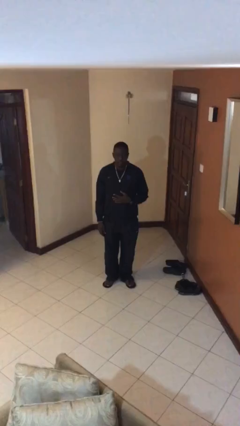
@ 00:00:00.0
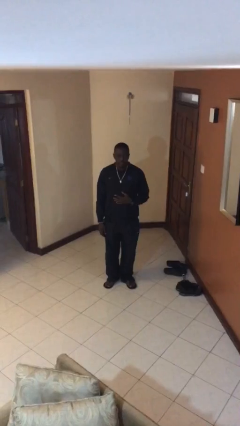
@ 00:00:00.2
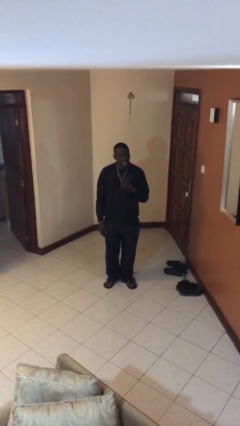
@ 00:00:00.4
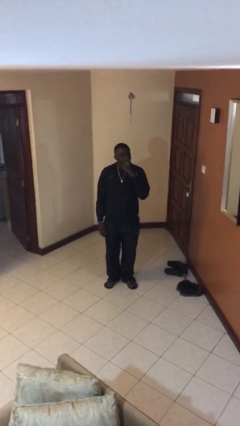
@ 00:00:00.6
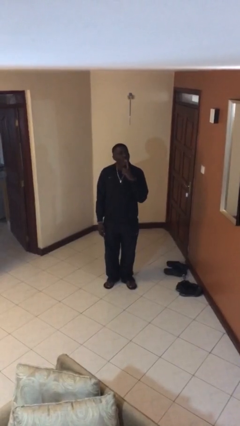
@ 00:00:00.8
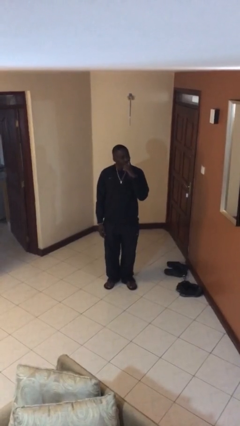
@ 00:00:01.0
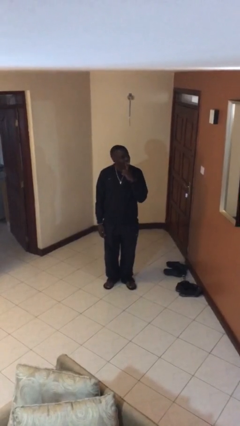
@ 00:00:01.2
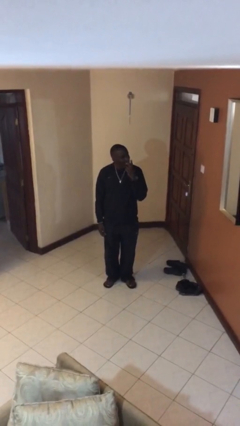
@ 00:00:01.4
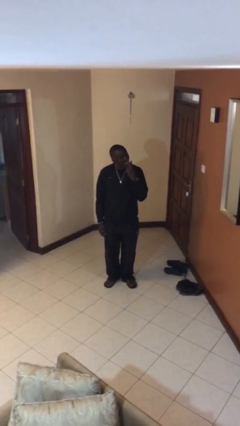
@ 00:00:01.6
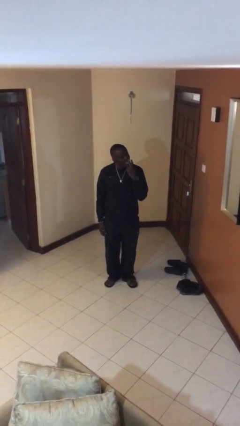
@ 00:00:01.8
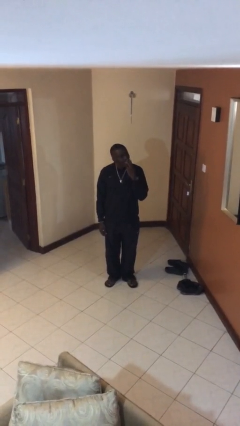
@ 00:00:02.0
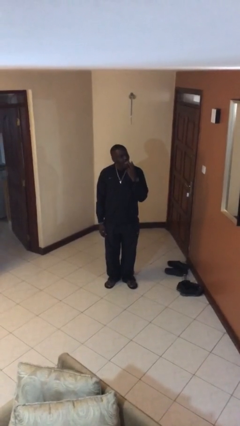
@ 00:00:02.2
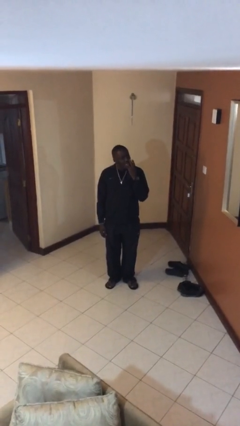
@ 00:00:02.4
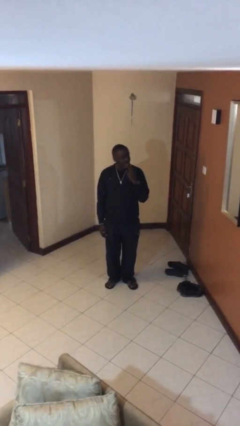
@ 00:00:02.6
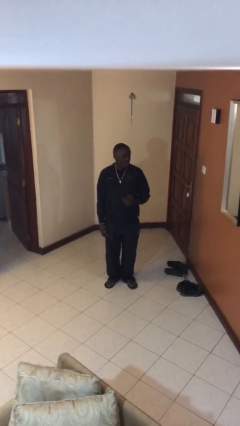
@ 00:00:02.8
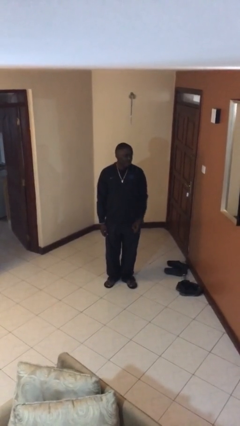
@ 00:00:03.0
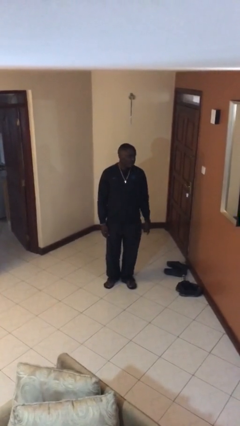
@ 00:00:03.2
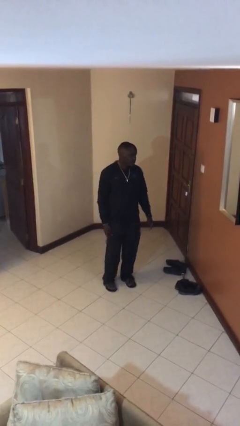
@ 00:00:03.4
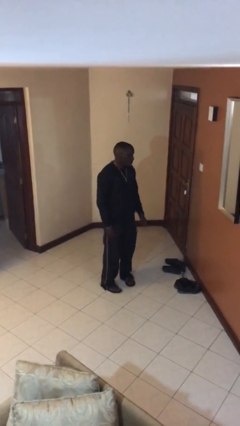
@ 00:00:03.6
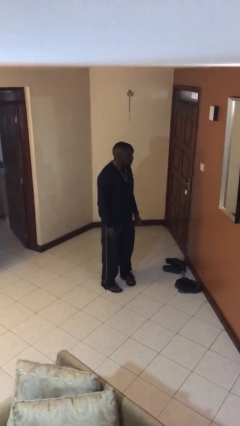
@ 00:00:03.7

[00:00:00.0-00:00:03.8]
person licks fingers

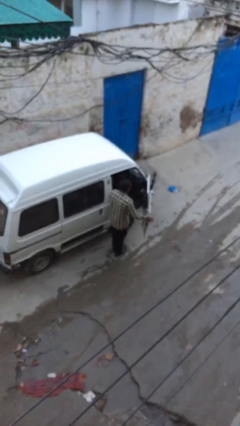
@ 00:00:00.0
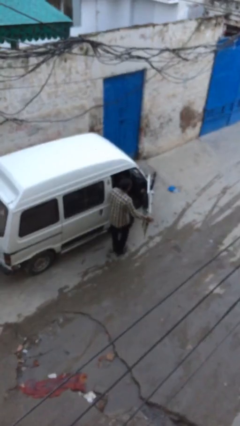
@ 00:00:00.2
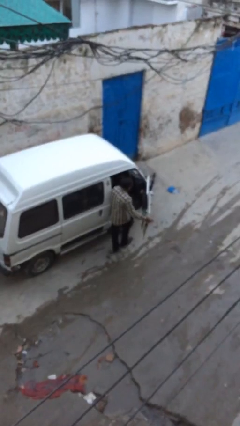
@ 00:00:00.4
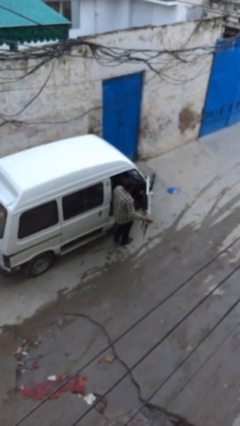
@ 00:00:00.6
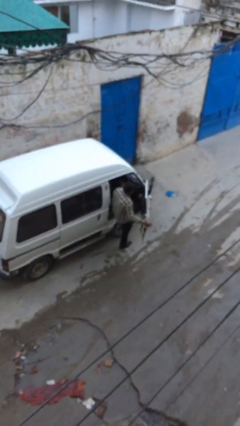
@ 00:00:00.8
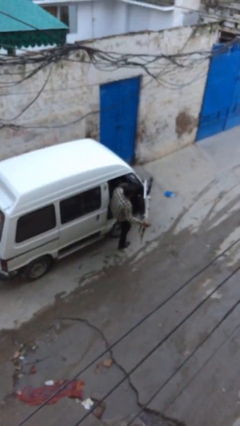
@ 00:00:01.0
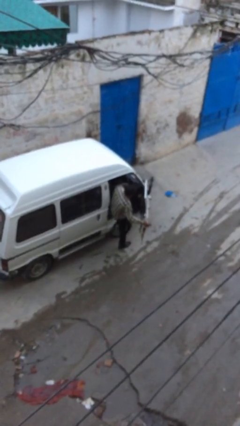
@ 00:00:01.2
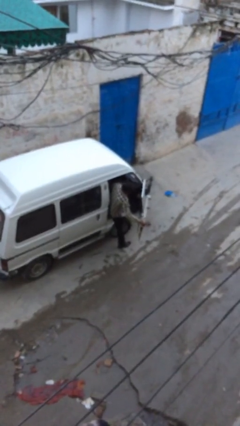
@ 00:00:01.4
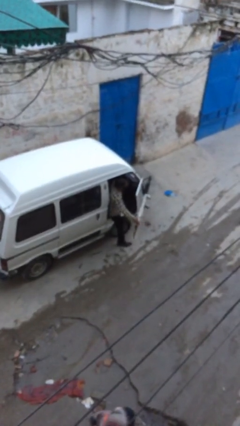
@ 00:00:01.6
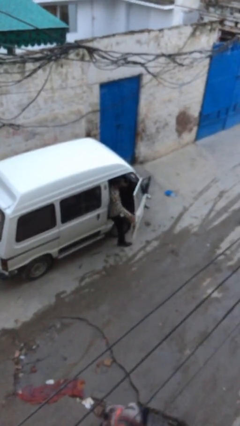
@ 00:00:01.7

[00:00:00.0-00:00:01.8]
person enters car

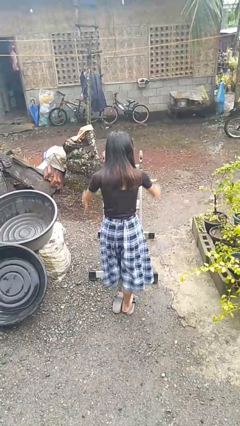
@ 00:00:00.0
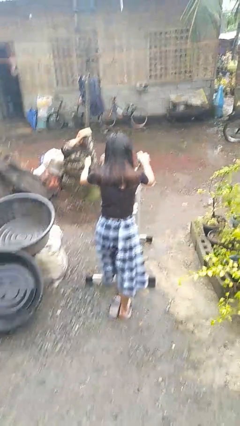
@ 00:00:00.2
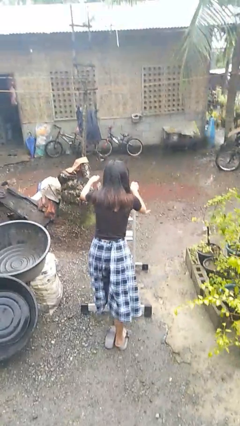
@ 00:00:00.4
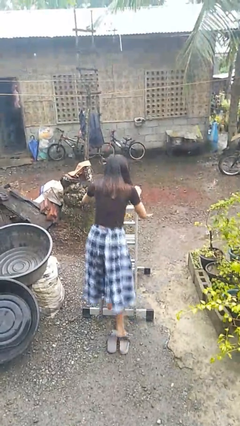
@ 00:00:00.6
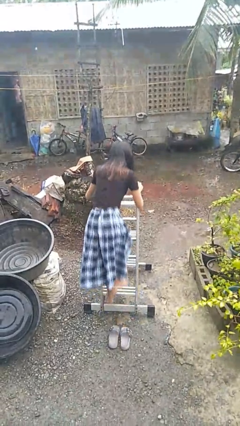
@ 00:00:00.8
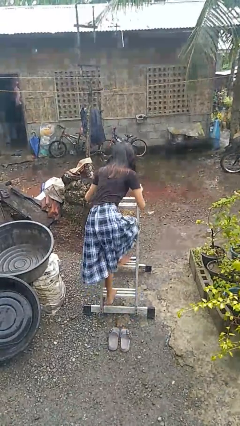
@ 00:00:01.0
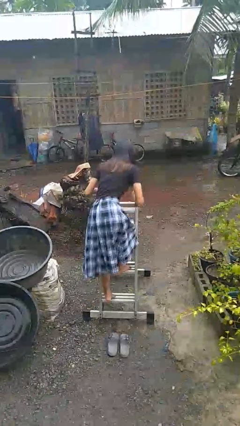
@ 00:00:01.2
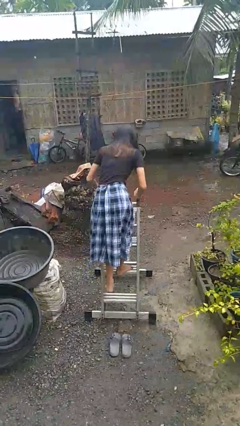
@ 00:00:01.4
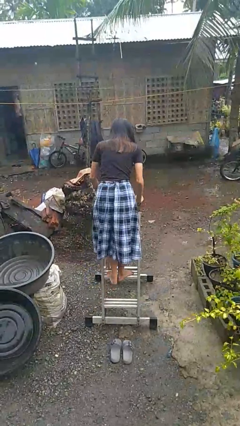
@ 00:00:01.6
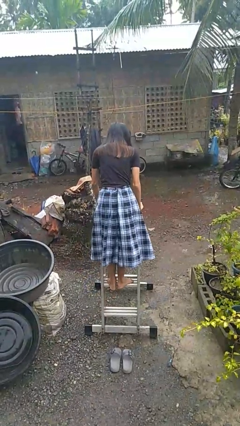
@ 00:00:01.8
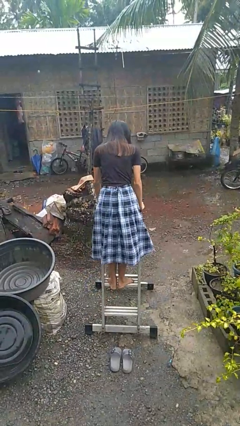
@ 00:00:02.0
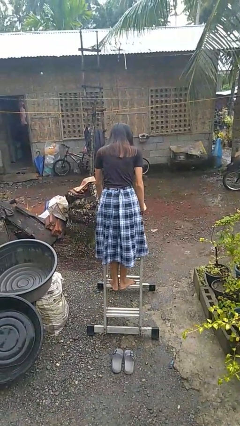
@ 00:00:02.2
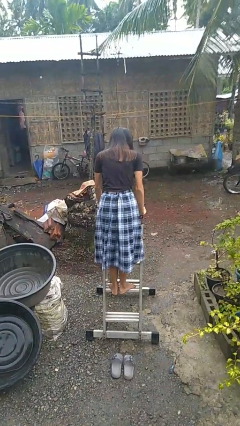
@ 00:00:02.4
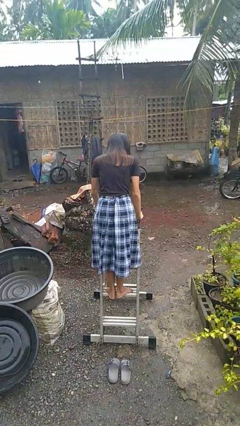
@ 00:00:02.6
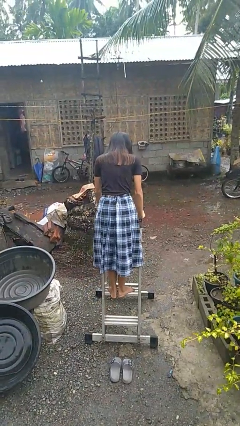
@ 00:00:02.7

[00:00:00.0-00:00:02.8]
person climbs up ladder

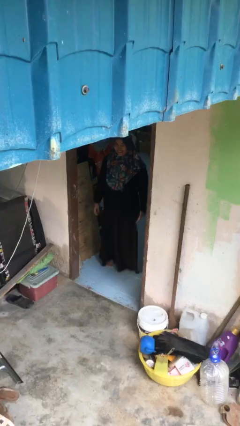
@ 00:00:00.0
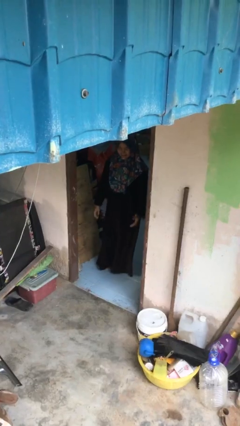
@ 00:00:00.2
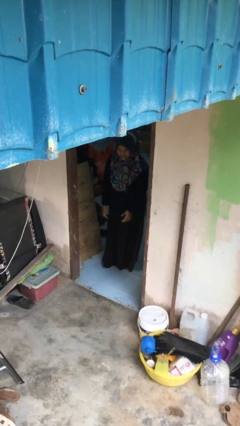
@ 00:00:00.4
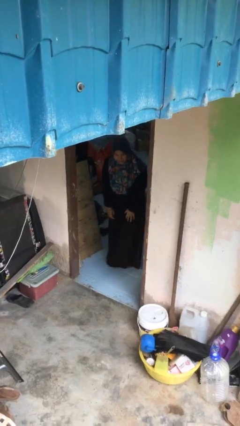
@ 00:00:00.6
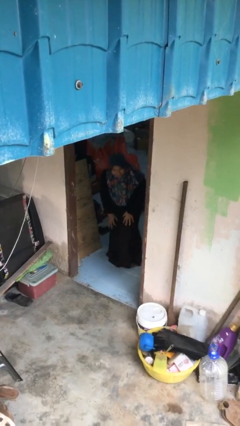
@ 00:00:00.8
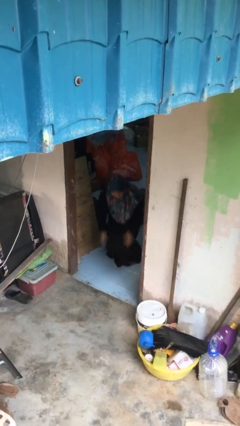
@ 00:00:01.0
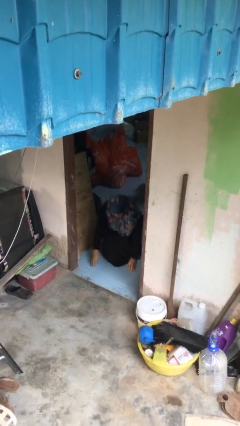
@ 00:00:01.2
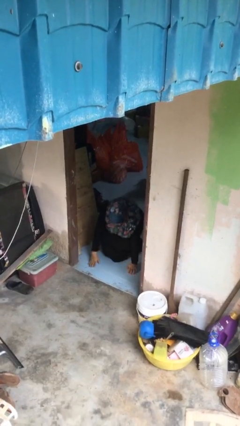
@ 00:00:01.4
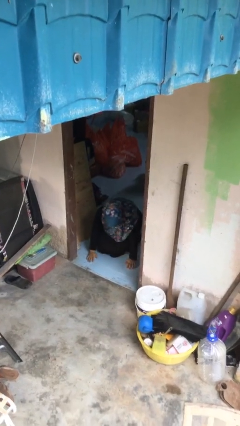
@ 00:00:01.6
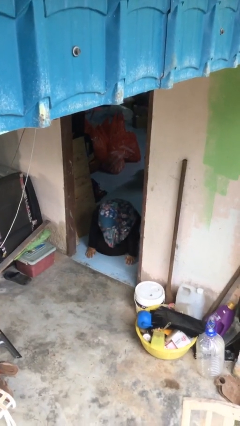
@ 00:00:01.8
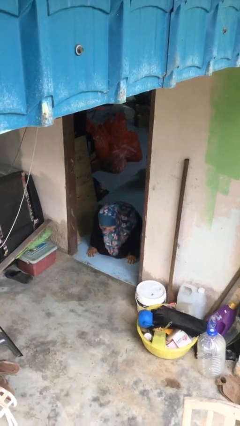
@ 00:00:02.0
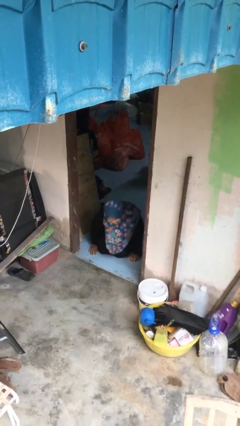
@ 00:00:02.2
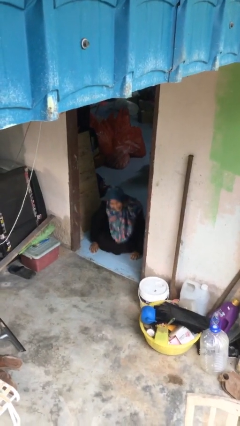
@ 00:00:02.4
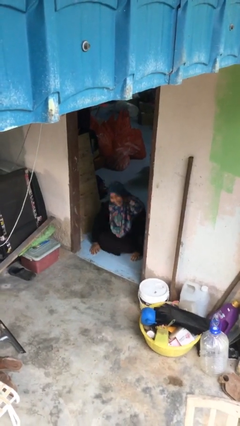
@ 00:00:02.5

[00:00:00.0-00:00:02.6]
person sits down

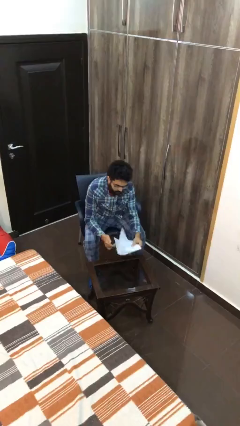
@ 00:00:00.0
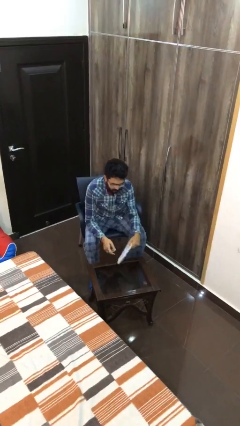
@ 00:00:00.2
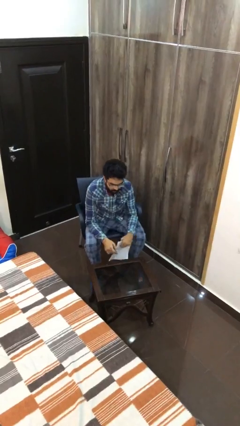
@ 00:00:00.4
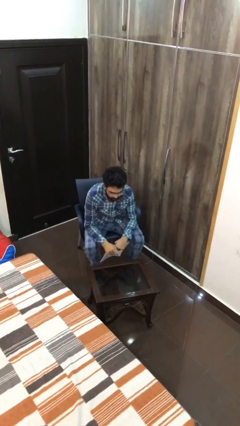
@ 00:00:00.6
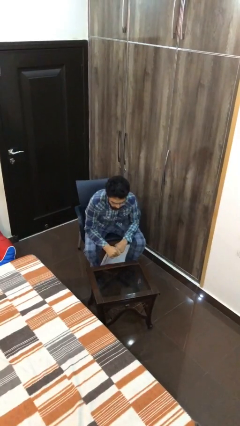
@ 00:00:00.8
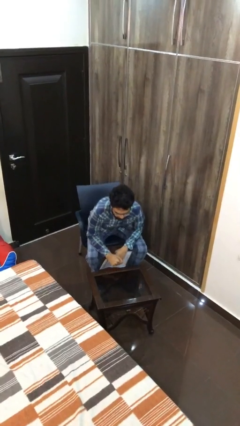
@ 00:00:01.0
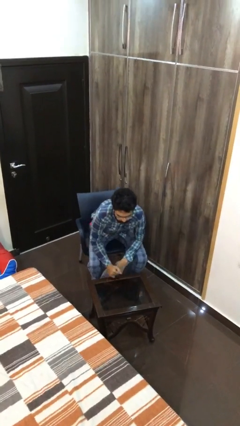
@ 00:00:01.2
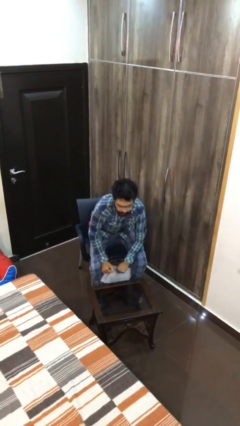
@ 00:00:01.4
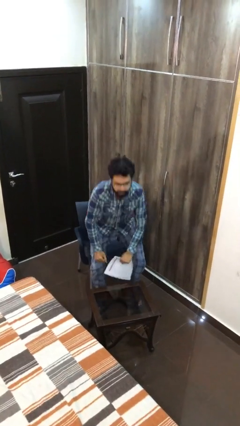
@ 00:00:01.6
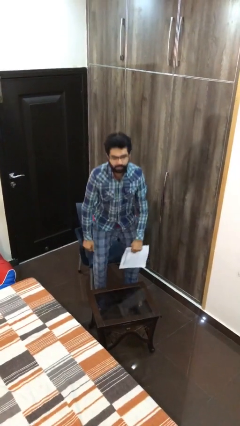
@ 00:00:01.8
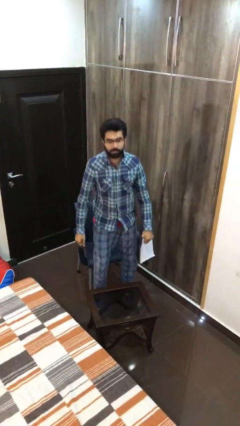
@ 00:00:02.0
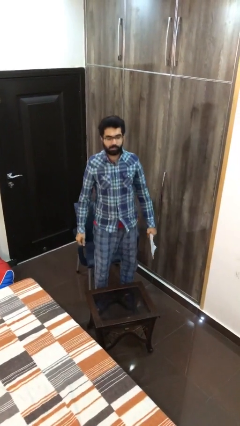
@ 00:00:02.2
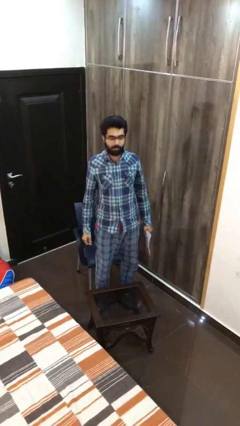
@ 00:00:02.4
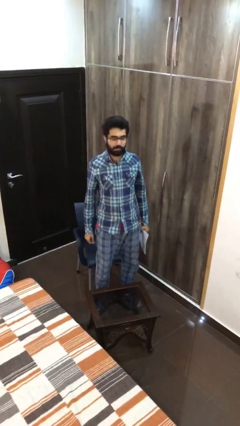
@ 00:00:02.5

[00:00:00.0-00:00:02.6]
person stands up

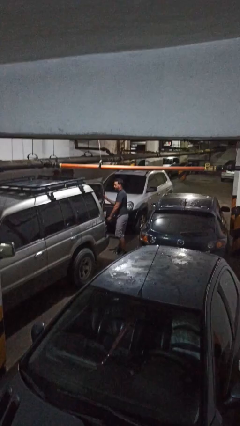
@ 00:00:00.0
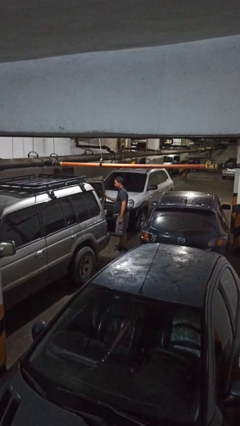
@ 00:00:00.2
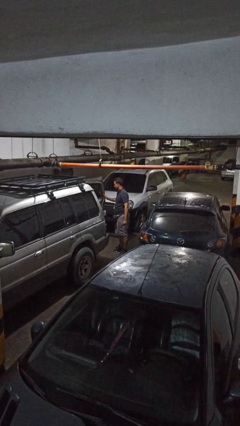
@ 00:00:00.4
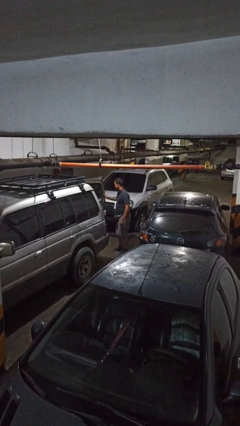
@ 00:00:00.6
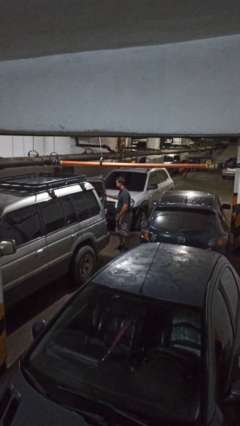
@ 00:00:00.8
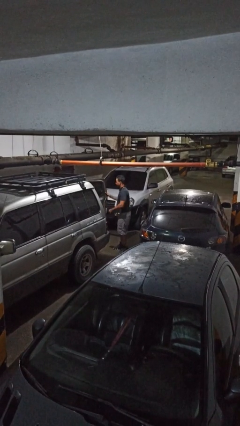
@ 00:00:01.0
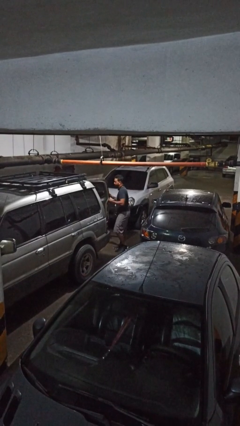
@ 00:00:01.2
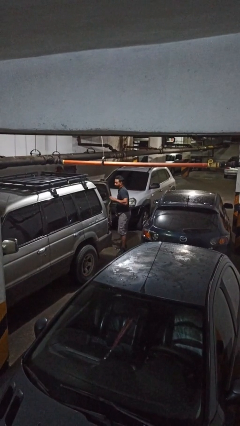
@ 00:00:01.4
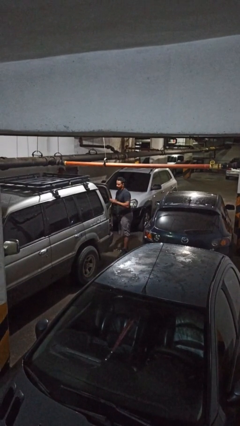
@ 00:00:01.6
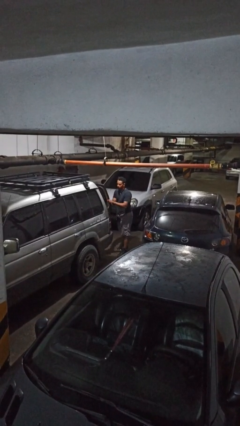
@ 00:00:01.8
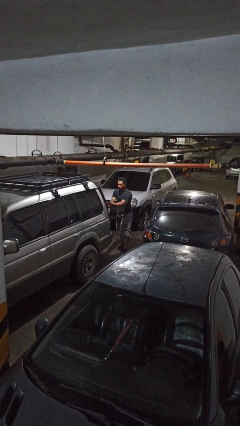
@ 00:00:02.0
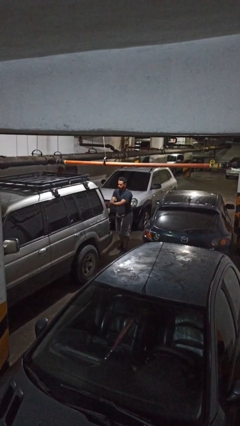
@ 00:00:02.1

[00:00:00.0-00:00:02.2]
person closes car trunk

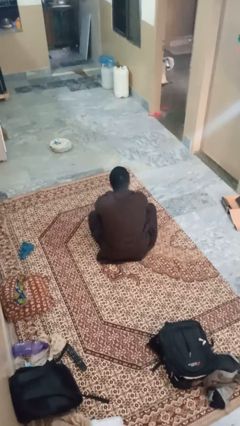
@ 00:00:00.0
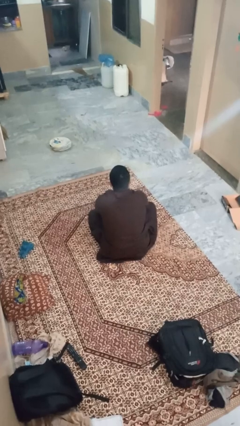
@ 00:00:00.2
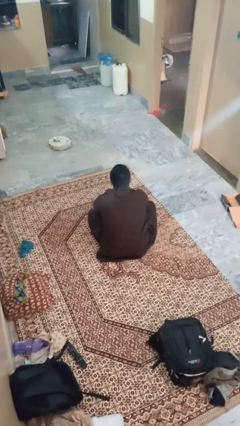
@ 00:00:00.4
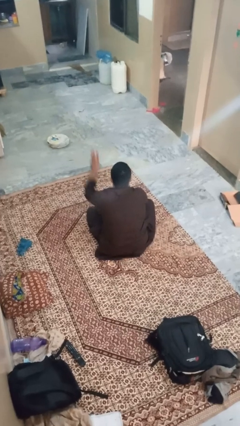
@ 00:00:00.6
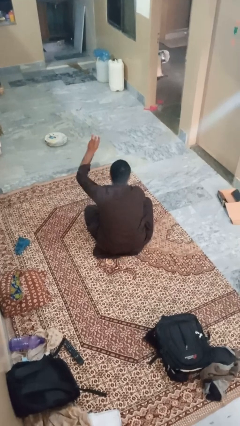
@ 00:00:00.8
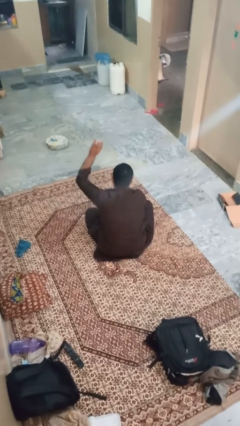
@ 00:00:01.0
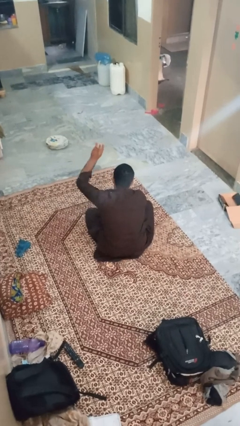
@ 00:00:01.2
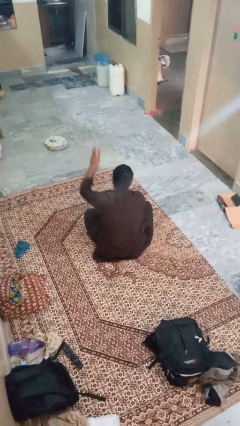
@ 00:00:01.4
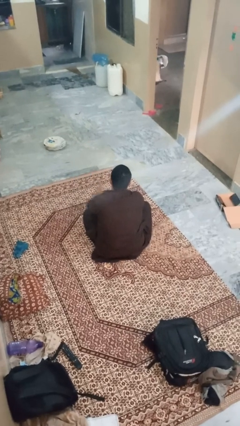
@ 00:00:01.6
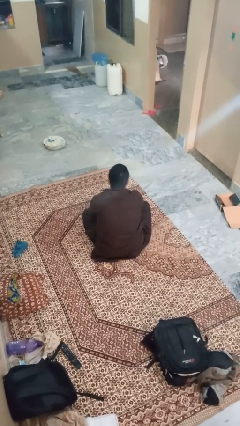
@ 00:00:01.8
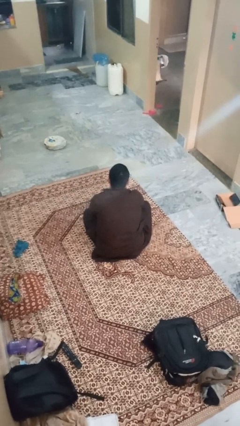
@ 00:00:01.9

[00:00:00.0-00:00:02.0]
person gestures number three
